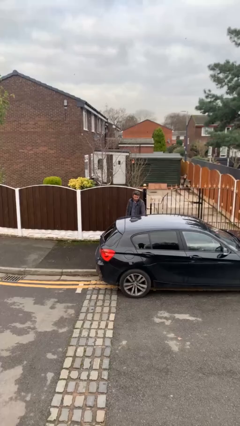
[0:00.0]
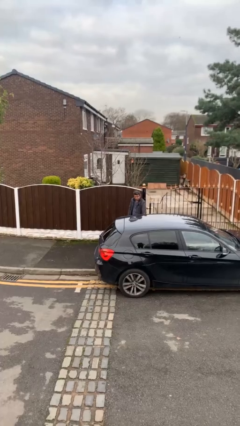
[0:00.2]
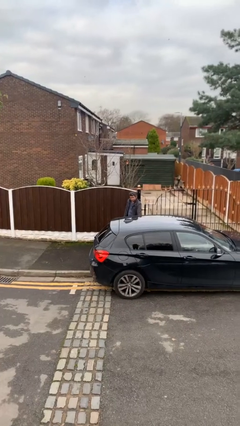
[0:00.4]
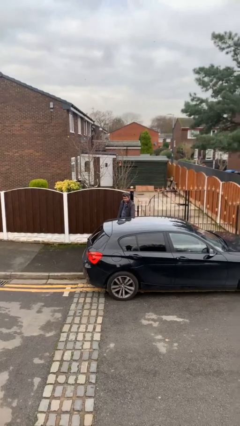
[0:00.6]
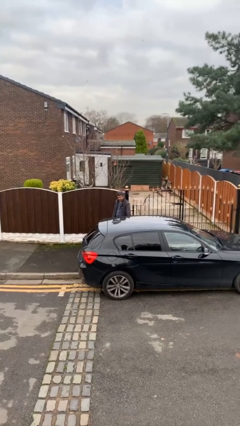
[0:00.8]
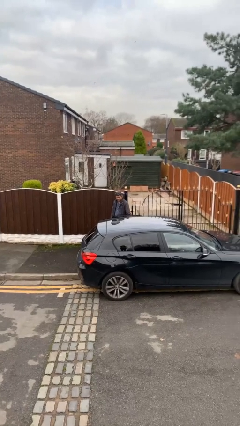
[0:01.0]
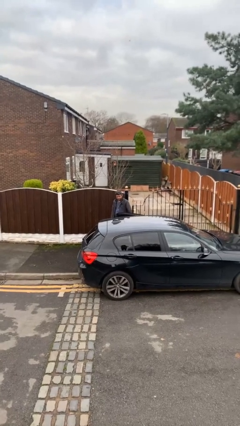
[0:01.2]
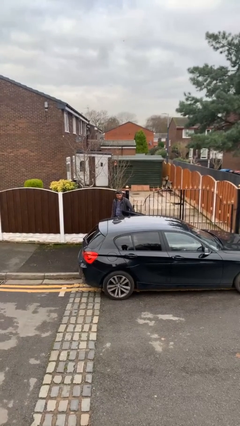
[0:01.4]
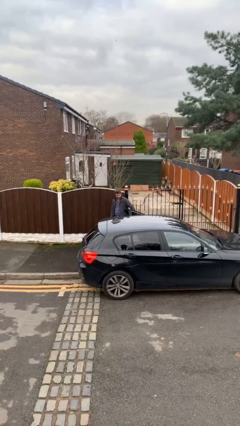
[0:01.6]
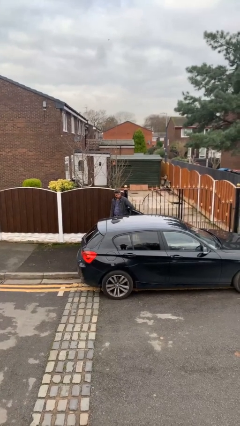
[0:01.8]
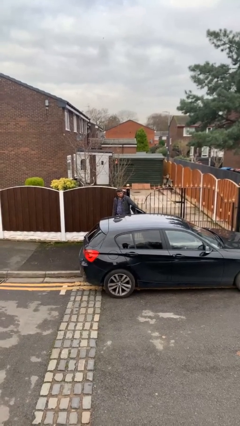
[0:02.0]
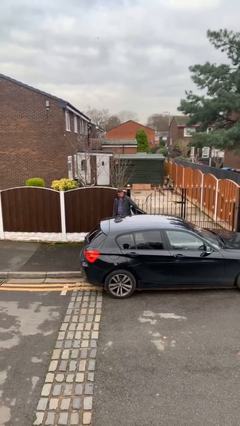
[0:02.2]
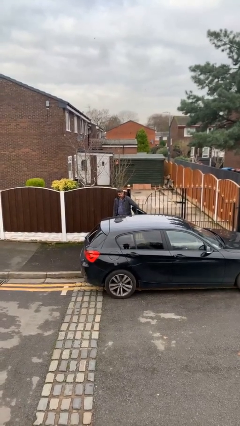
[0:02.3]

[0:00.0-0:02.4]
person opens car door

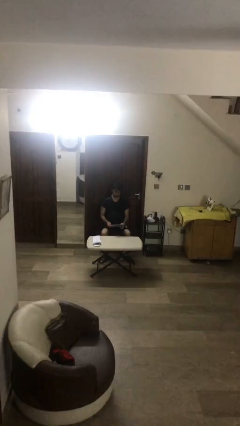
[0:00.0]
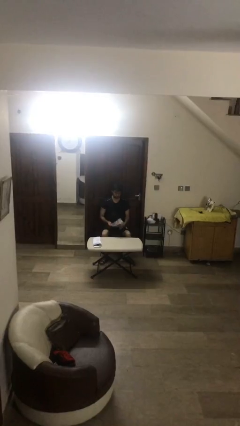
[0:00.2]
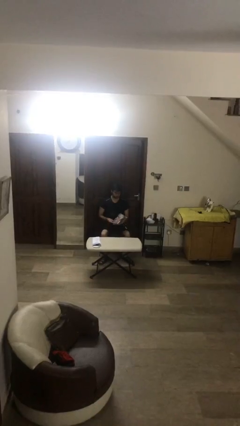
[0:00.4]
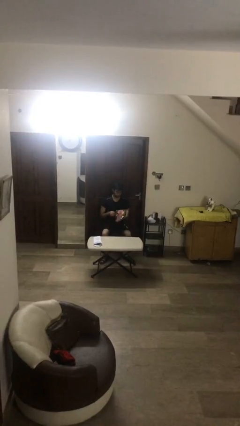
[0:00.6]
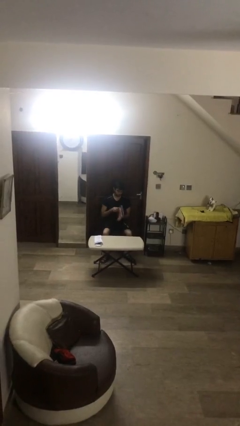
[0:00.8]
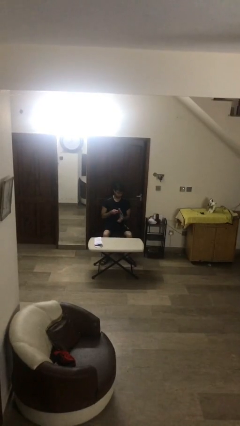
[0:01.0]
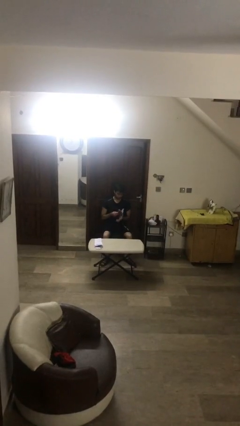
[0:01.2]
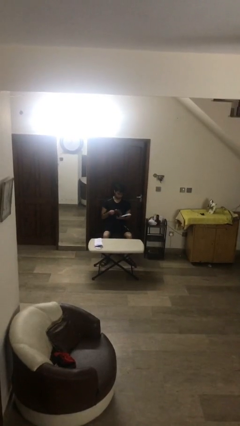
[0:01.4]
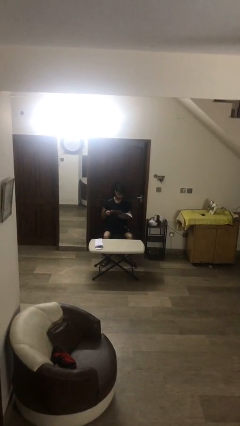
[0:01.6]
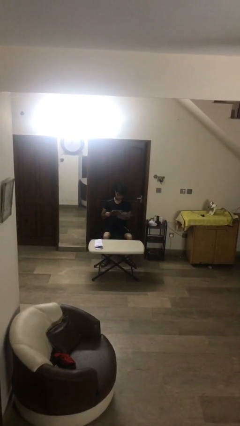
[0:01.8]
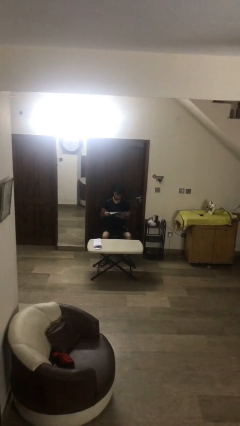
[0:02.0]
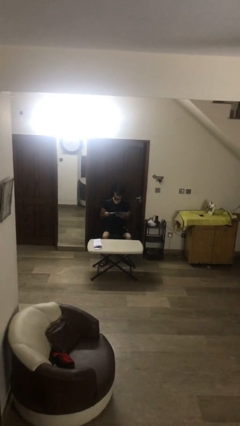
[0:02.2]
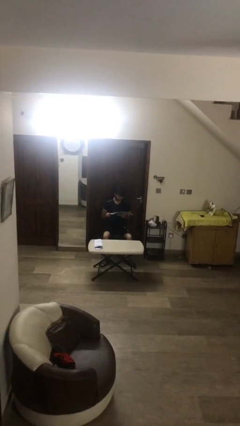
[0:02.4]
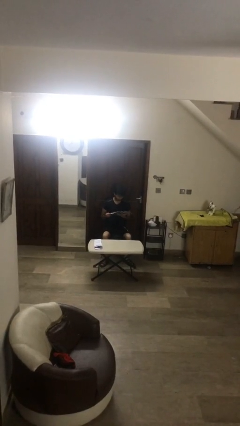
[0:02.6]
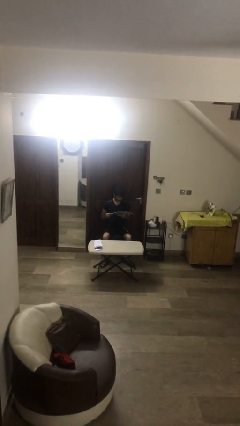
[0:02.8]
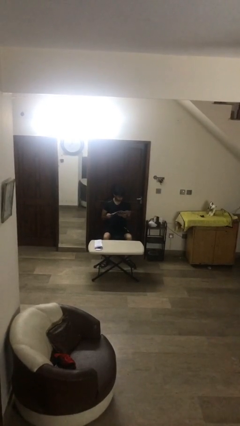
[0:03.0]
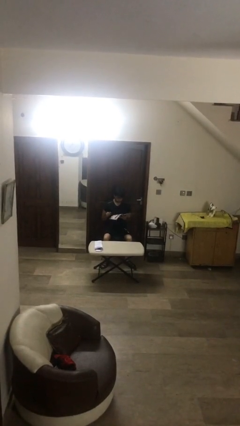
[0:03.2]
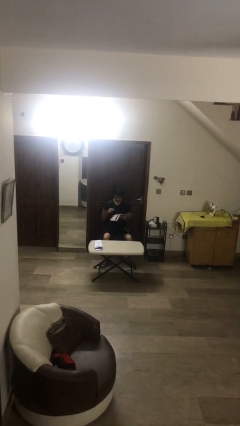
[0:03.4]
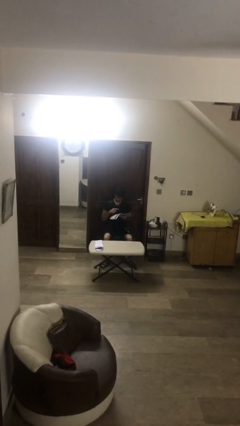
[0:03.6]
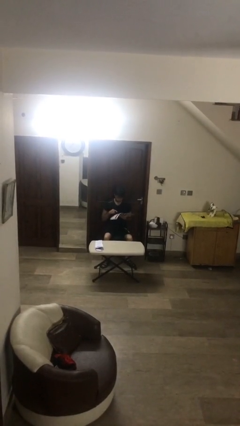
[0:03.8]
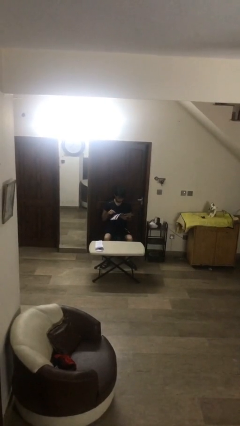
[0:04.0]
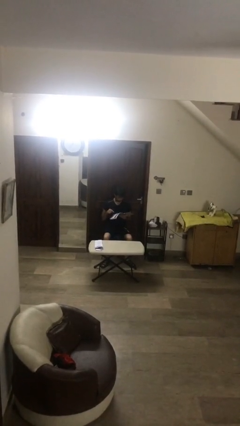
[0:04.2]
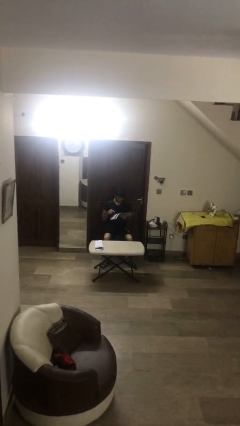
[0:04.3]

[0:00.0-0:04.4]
person reads document

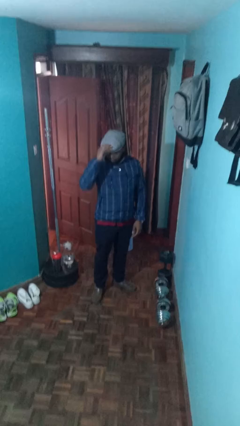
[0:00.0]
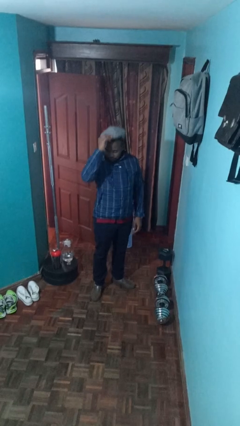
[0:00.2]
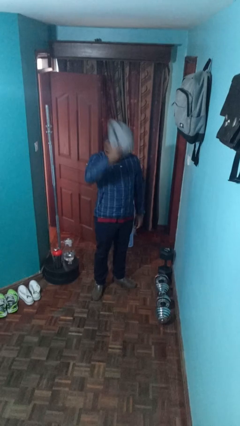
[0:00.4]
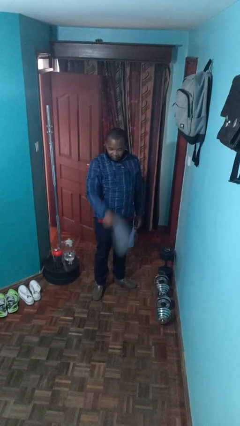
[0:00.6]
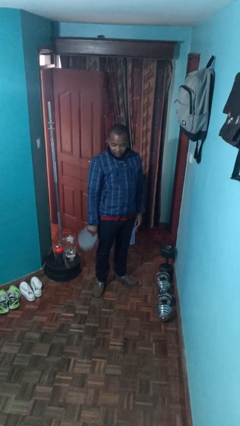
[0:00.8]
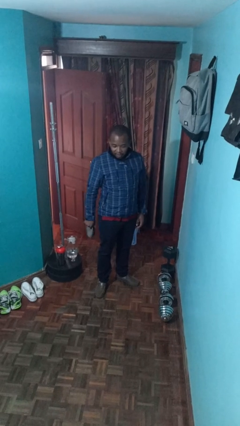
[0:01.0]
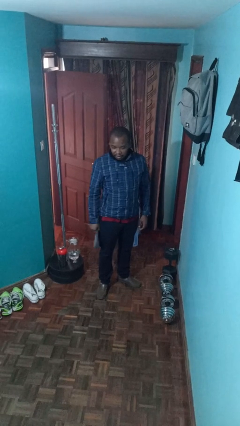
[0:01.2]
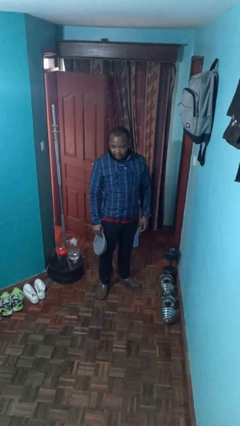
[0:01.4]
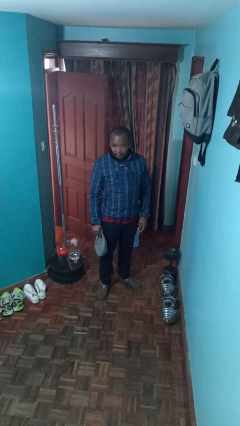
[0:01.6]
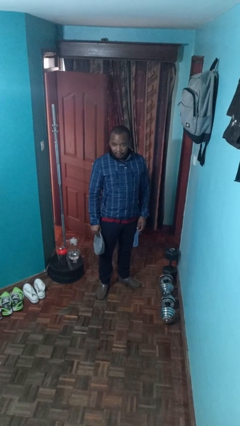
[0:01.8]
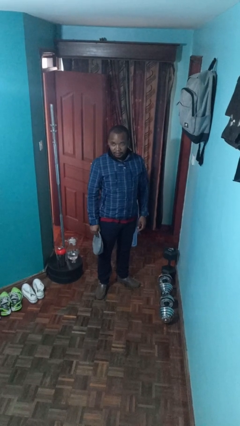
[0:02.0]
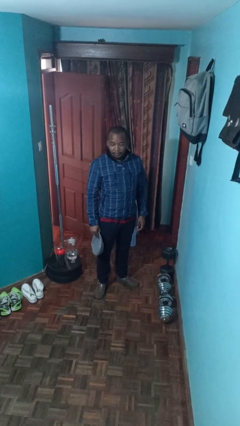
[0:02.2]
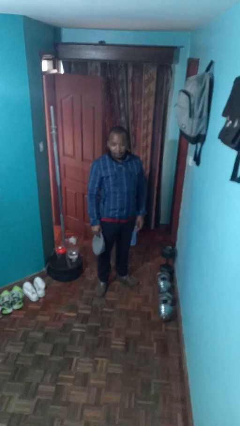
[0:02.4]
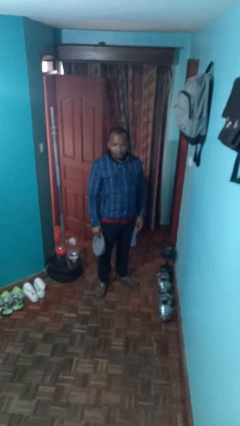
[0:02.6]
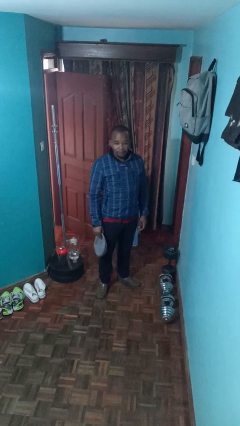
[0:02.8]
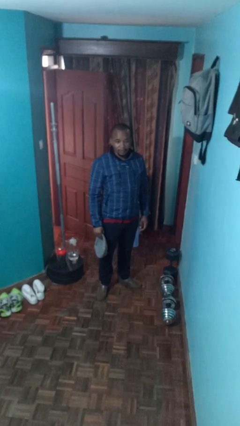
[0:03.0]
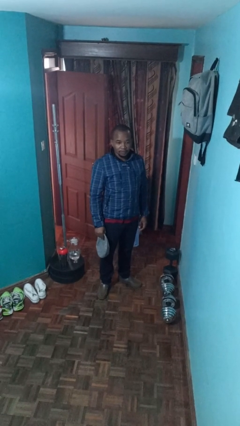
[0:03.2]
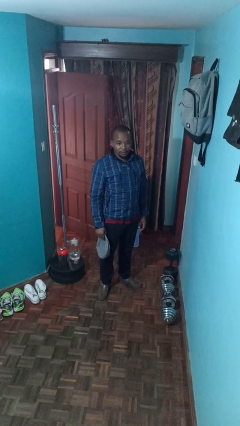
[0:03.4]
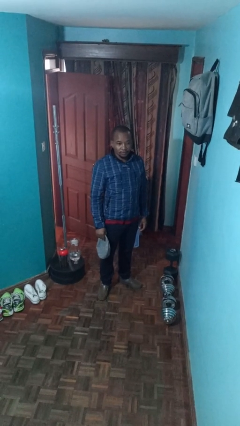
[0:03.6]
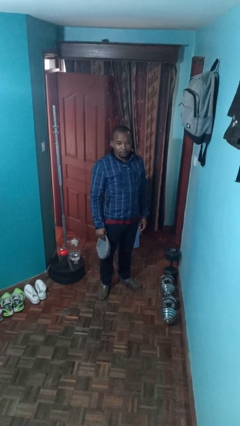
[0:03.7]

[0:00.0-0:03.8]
person takes off hat

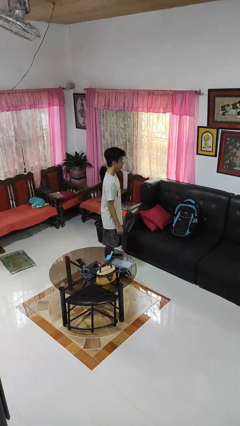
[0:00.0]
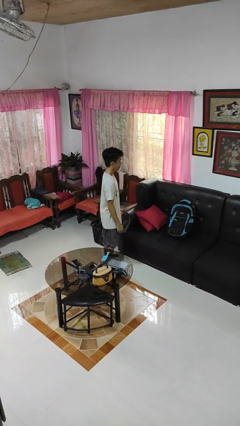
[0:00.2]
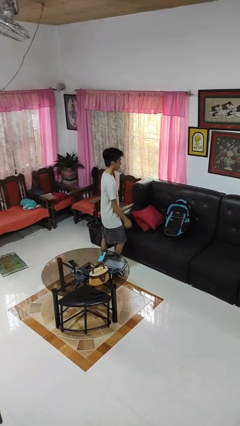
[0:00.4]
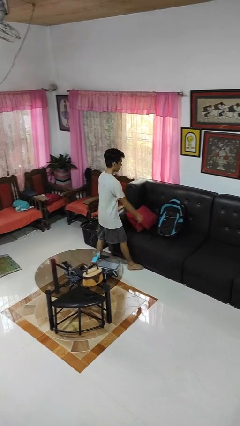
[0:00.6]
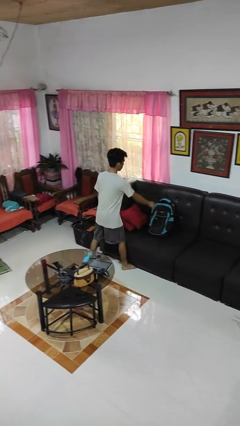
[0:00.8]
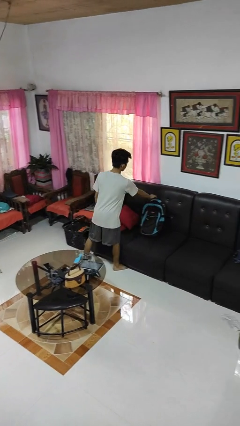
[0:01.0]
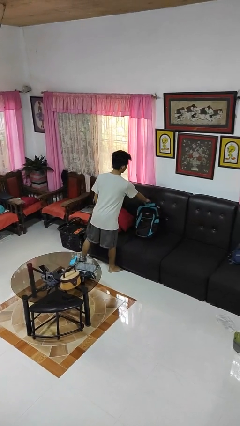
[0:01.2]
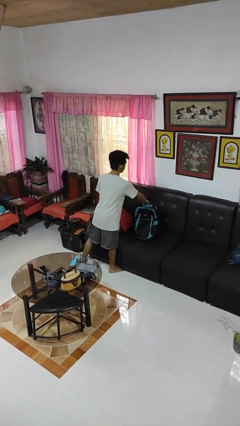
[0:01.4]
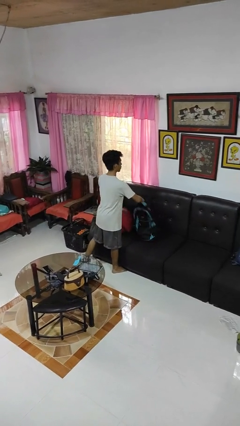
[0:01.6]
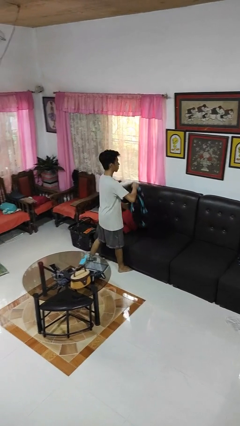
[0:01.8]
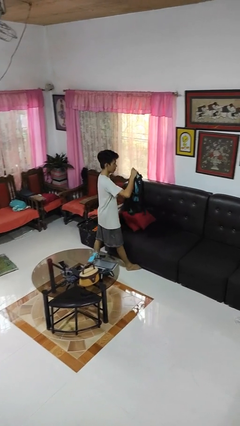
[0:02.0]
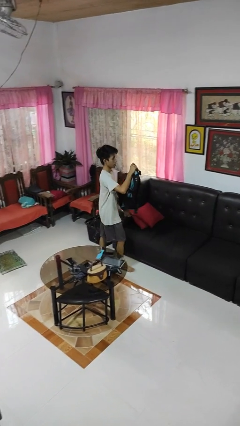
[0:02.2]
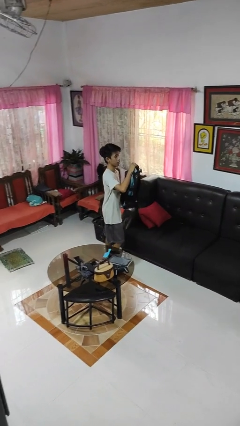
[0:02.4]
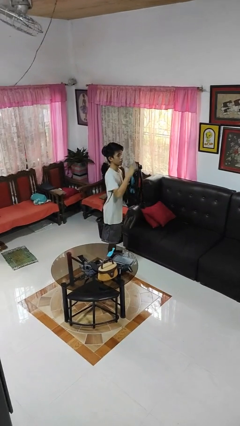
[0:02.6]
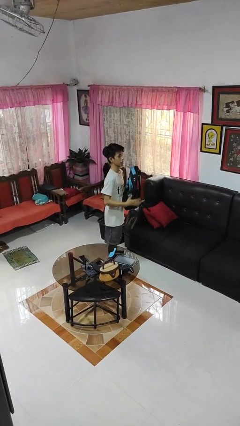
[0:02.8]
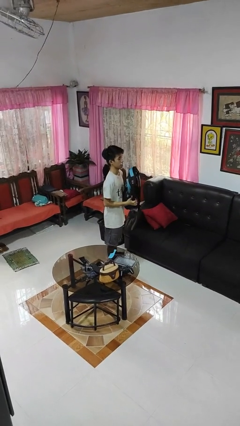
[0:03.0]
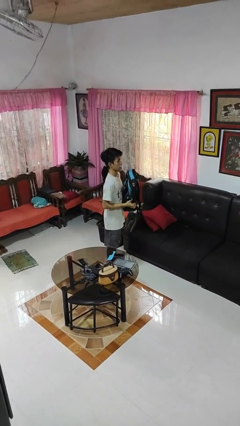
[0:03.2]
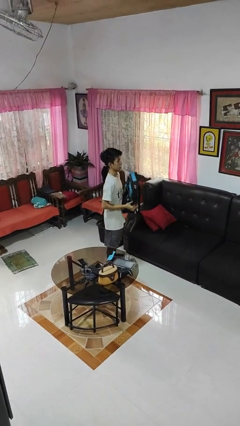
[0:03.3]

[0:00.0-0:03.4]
person picks up object from couch

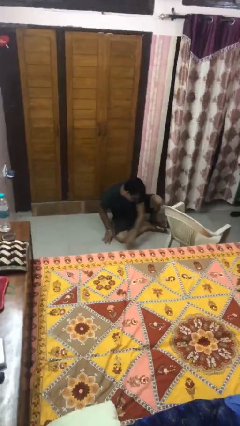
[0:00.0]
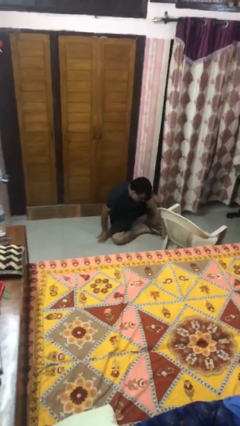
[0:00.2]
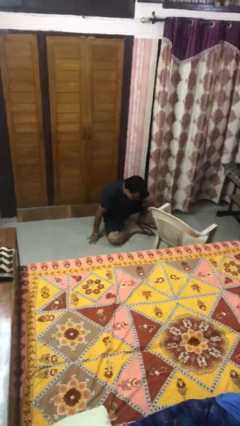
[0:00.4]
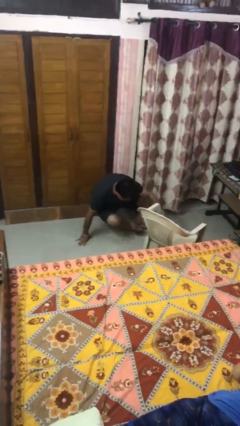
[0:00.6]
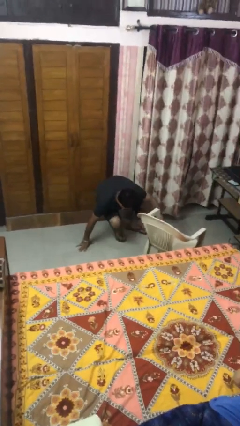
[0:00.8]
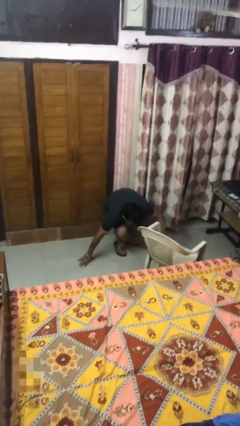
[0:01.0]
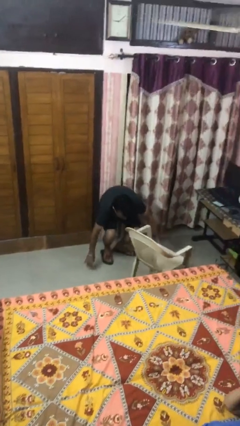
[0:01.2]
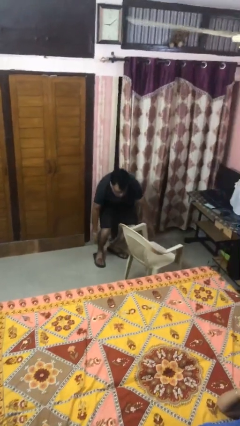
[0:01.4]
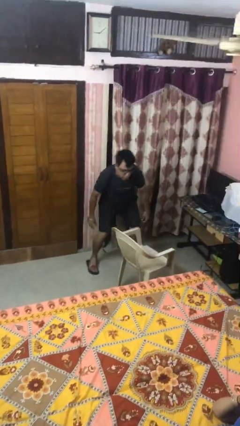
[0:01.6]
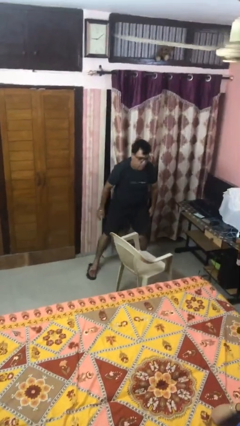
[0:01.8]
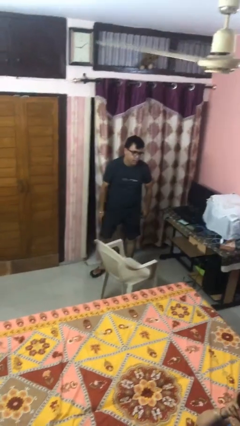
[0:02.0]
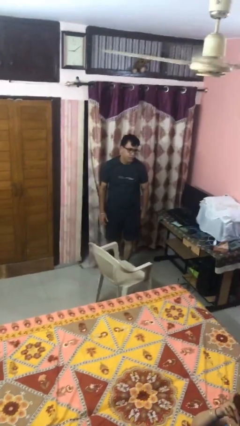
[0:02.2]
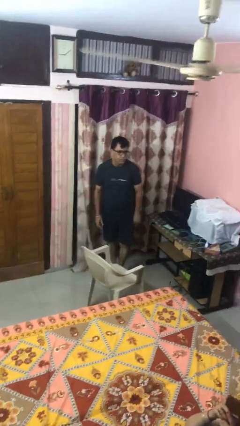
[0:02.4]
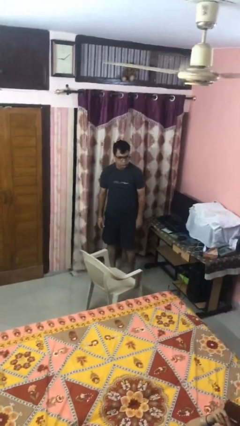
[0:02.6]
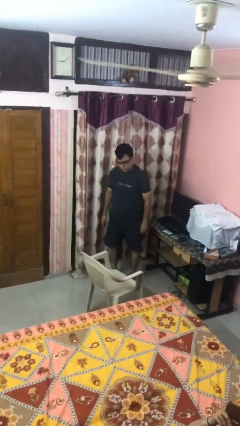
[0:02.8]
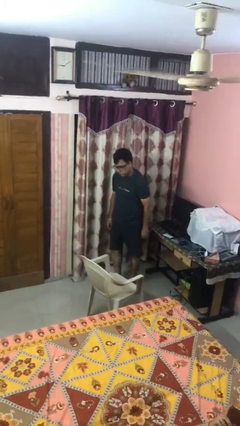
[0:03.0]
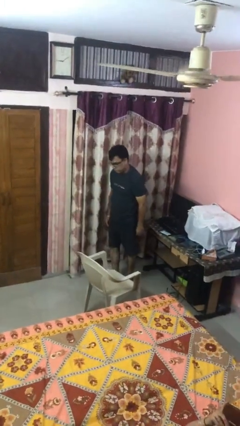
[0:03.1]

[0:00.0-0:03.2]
person stands up from floor

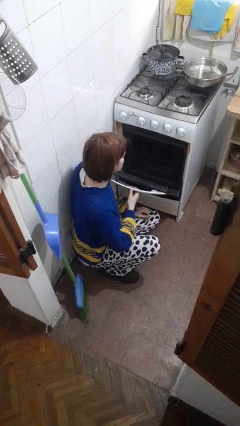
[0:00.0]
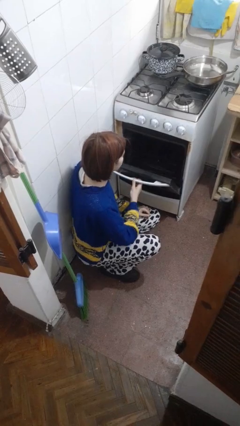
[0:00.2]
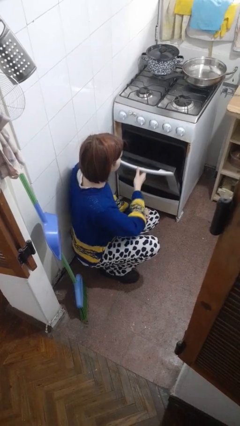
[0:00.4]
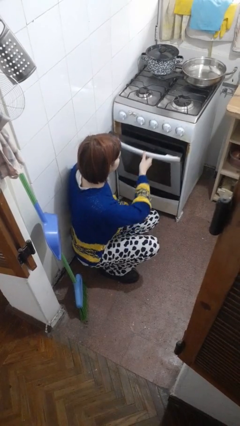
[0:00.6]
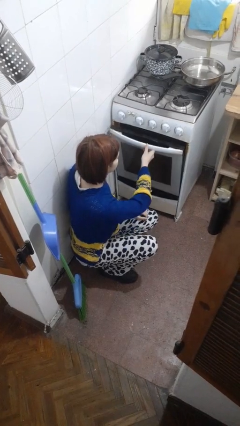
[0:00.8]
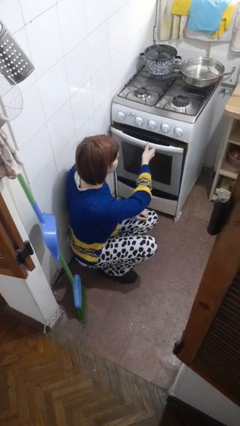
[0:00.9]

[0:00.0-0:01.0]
person closes oven door
